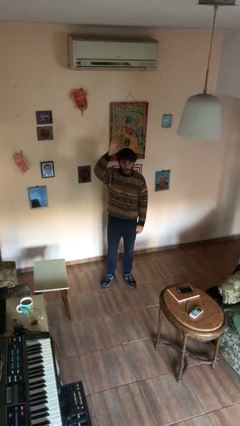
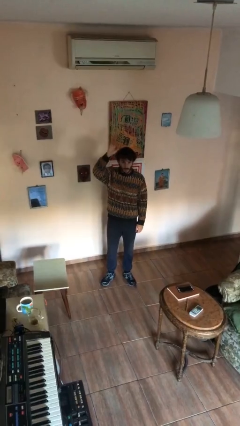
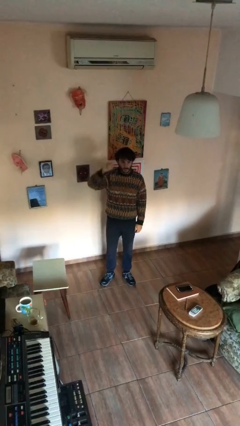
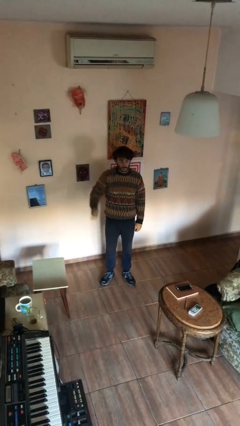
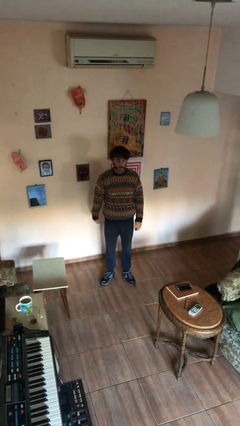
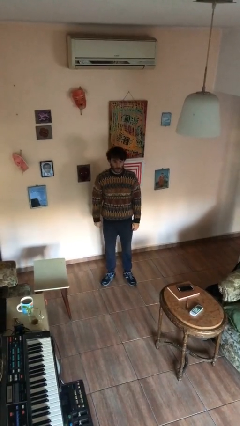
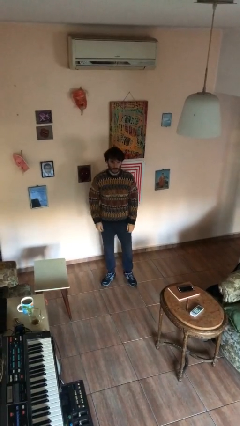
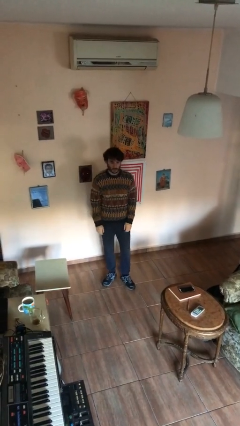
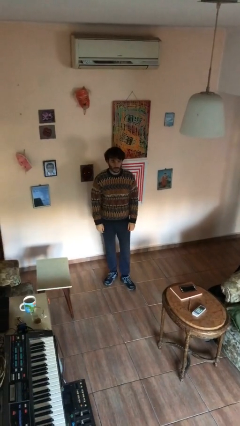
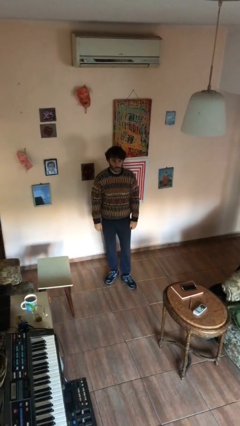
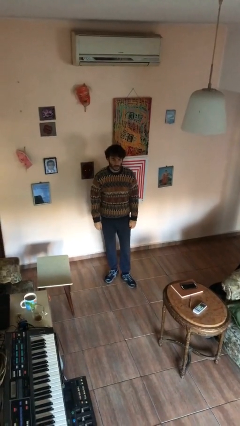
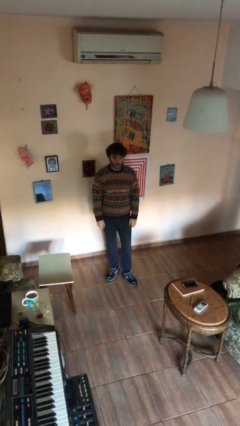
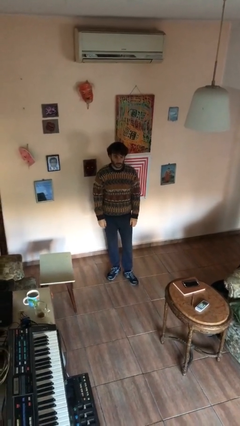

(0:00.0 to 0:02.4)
person gestures lower hand

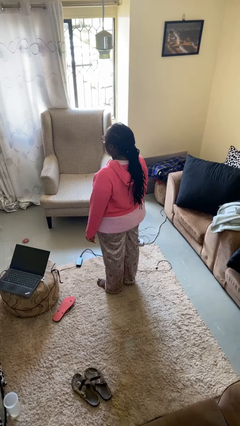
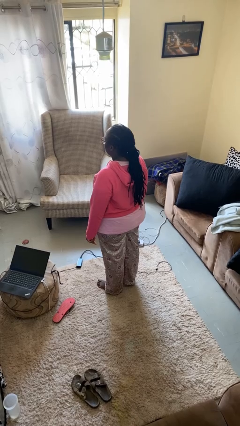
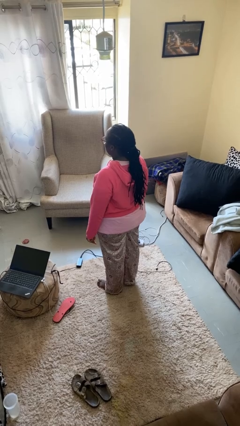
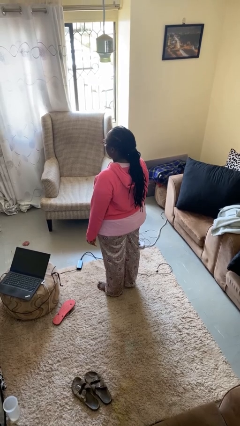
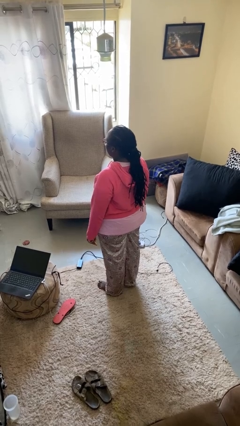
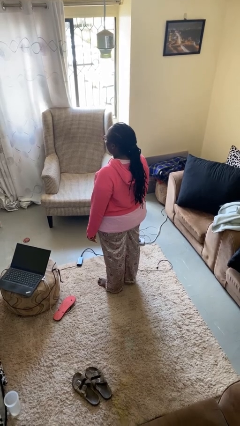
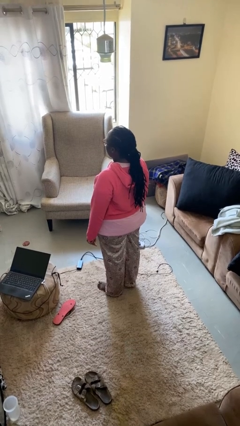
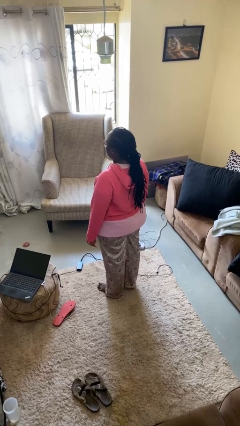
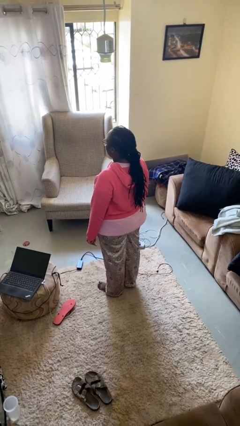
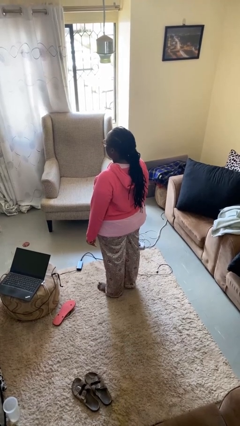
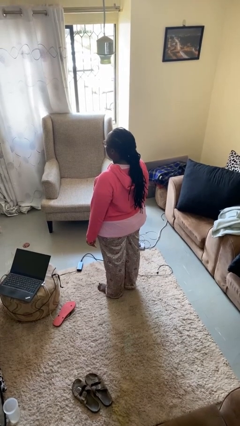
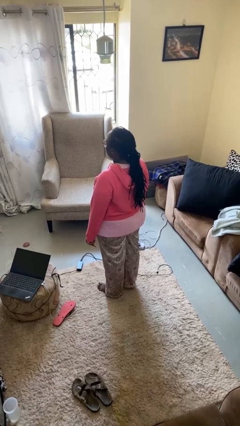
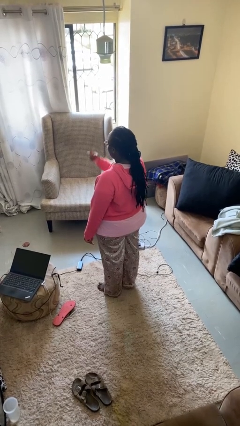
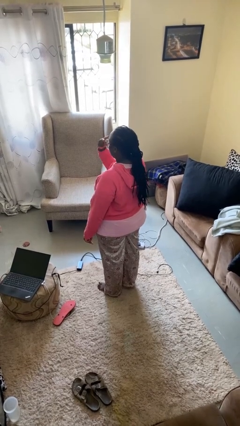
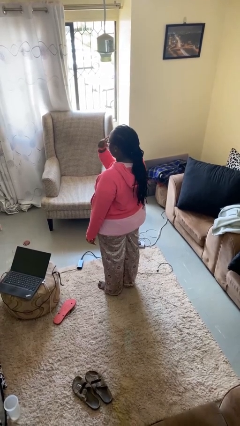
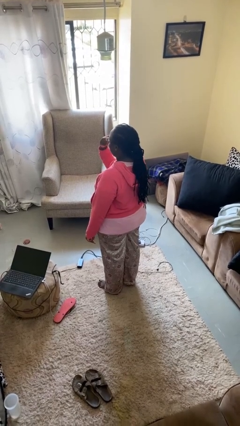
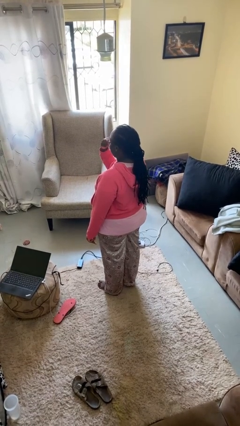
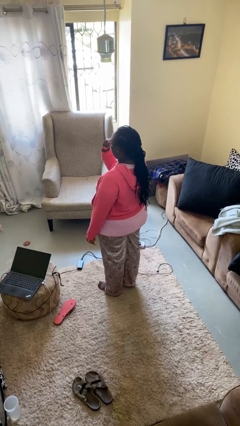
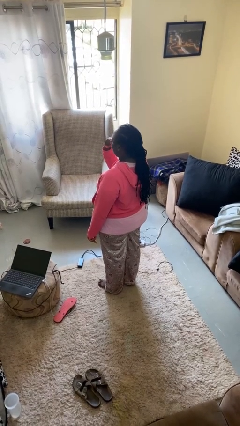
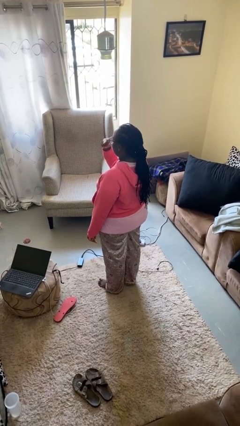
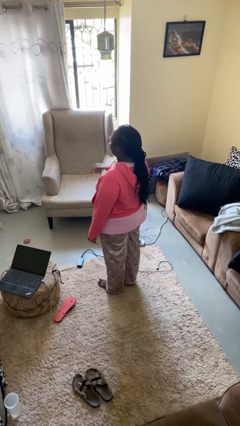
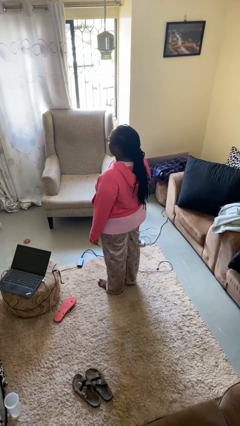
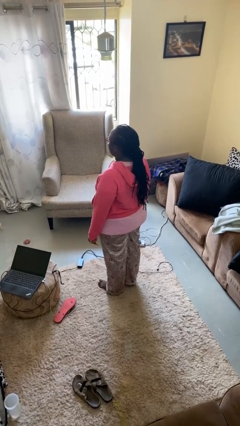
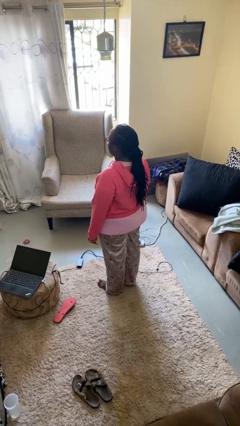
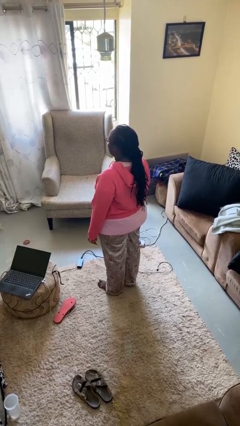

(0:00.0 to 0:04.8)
person gestures watch closely

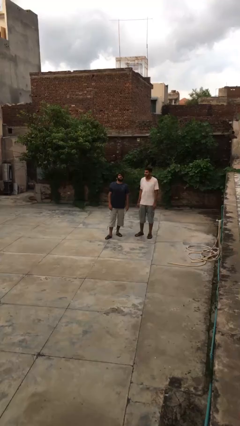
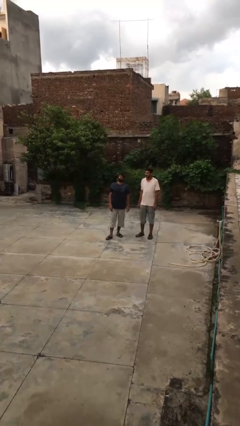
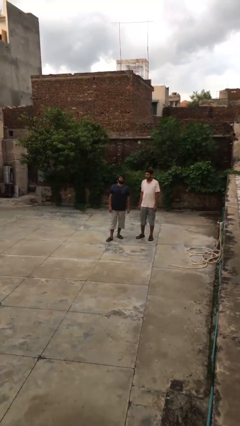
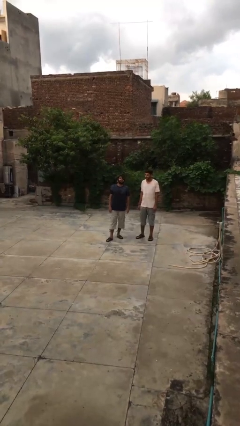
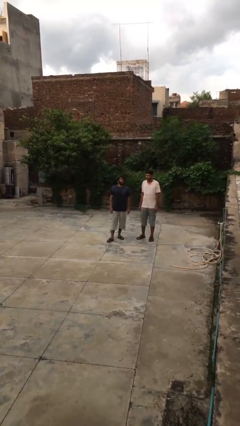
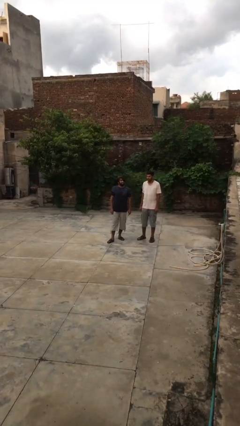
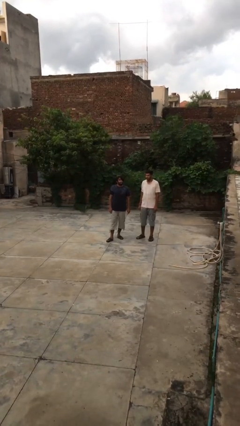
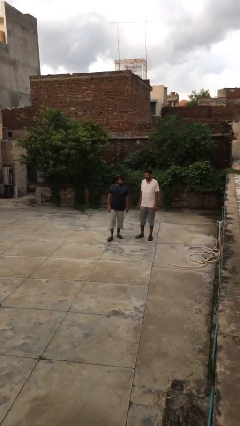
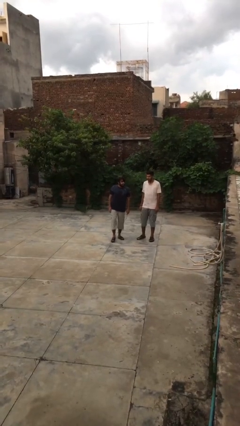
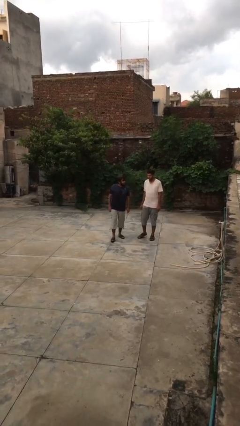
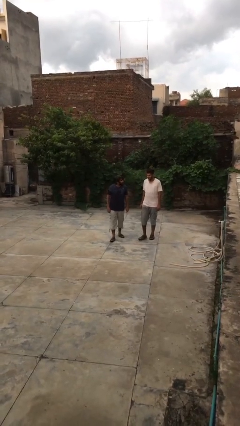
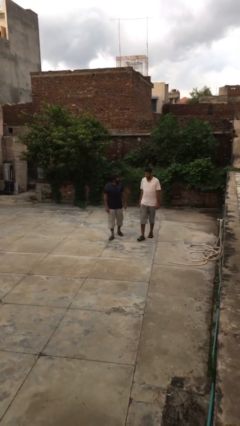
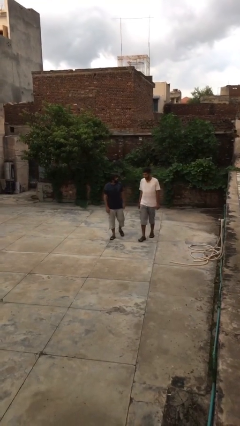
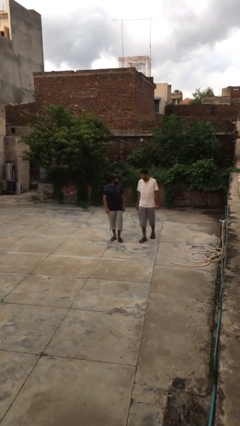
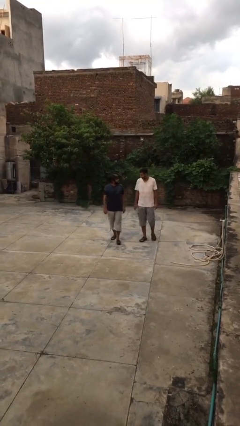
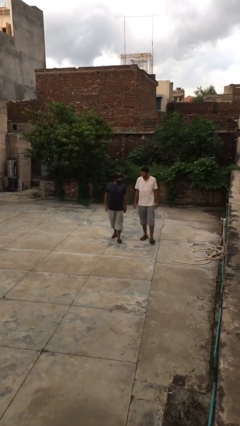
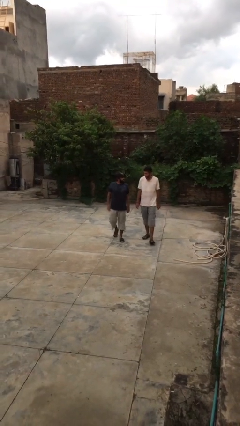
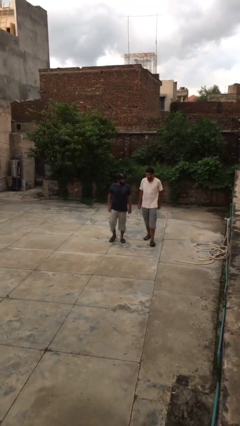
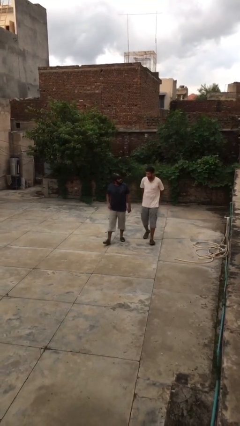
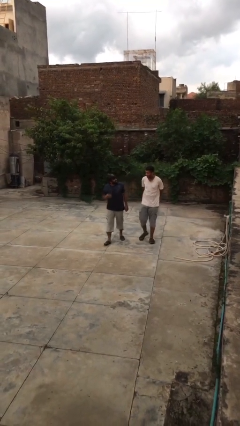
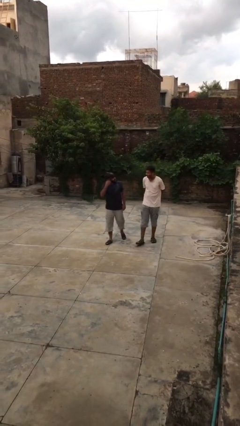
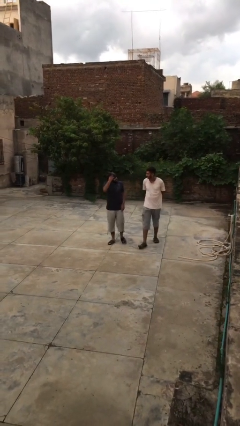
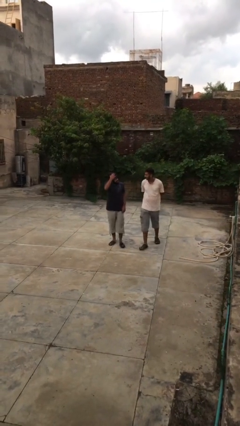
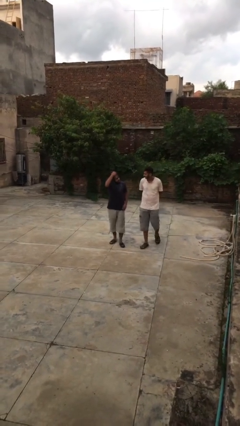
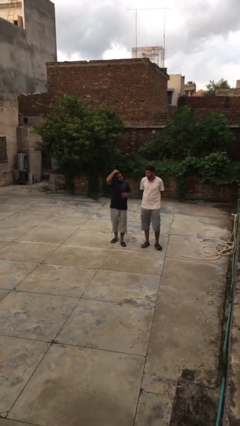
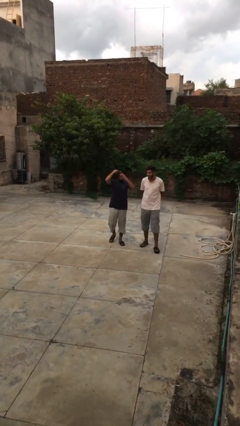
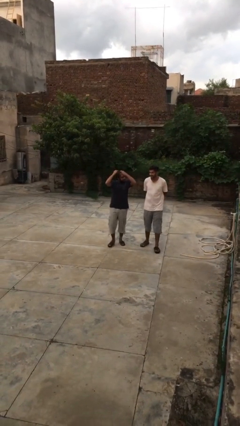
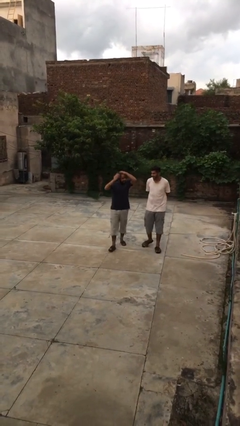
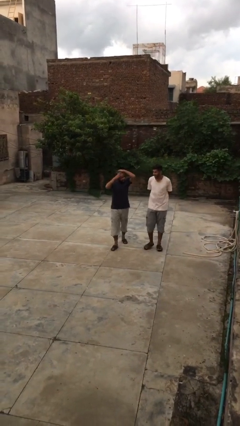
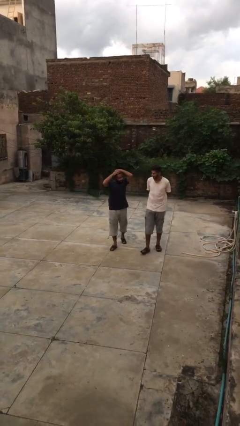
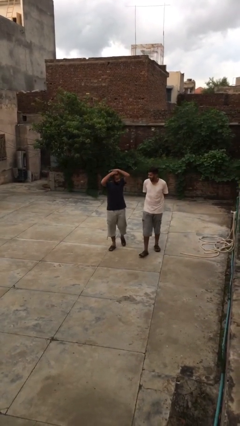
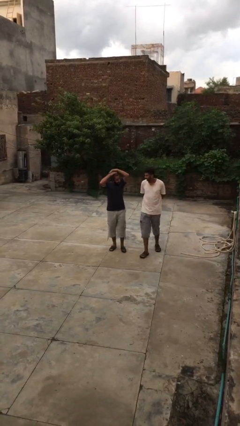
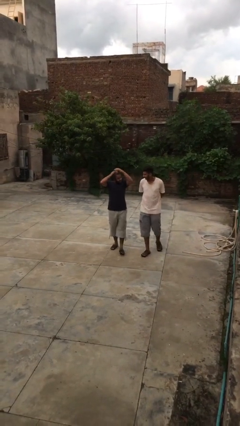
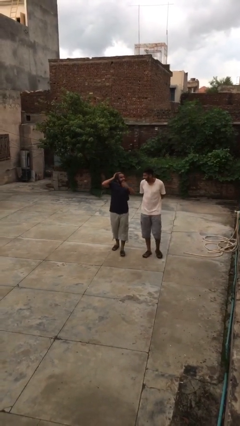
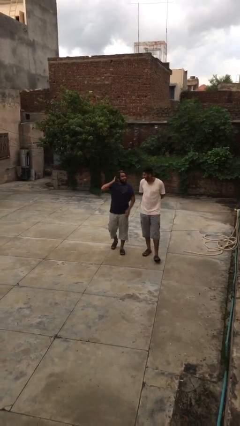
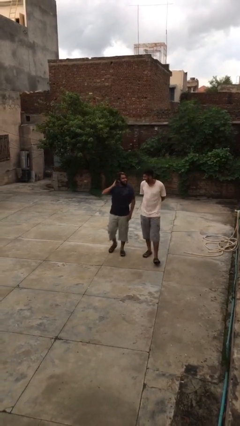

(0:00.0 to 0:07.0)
person talks to person

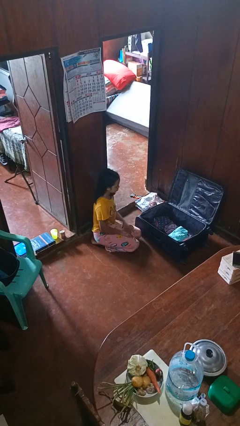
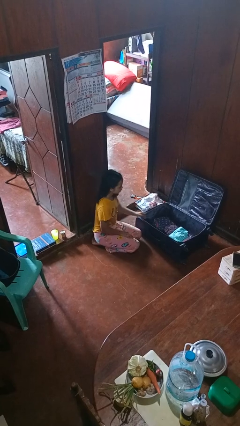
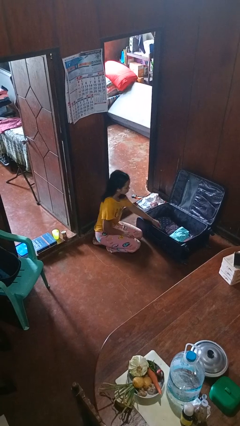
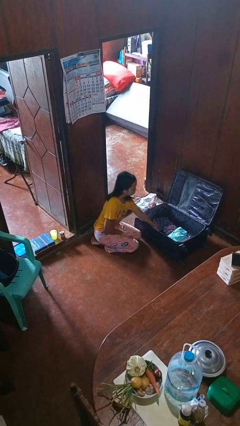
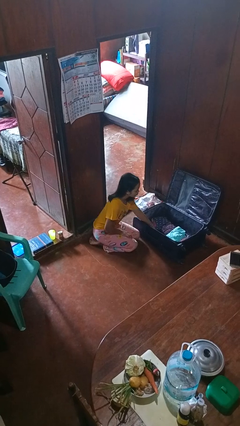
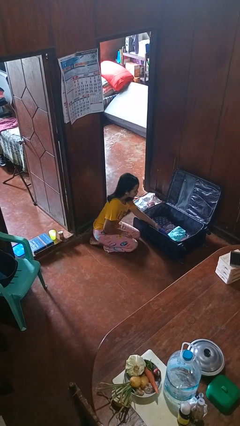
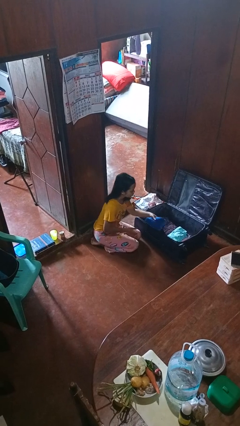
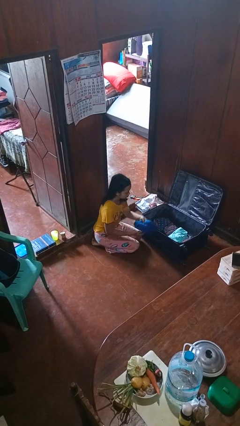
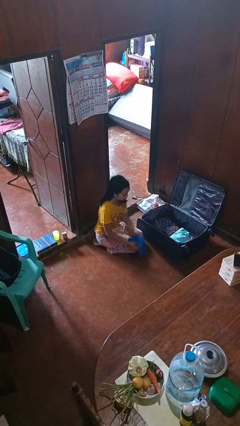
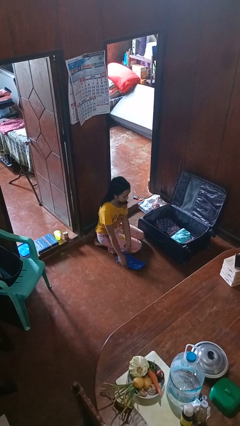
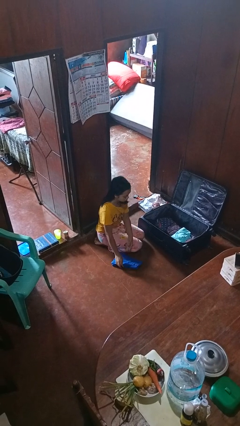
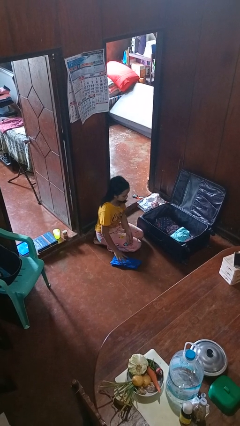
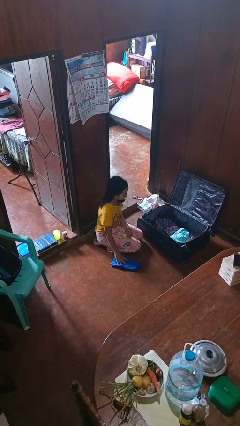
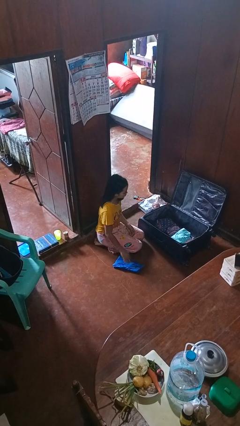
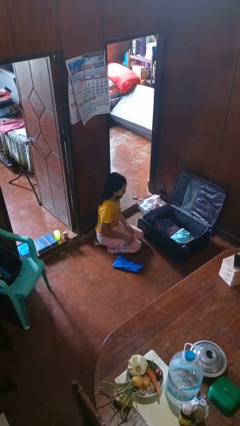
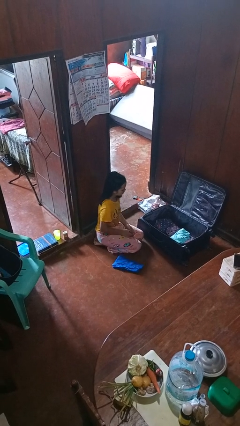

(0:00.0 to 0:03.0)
person unloads clothes from suitcase

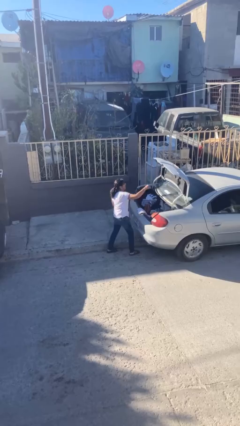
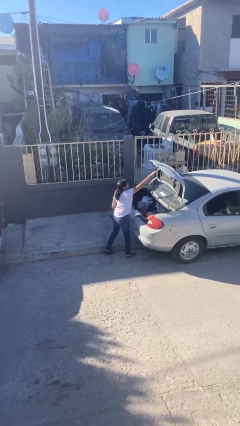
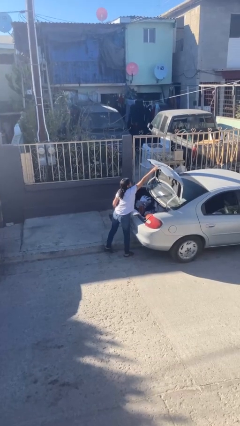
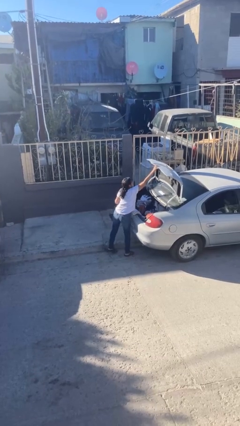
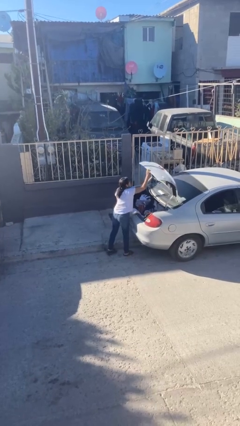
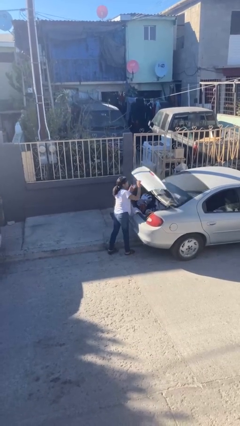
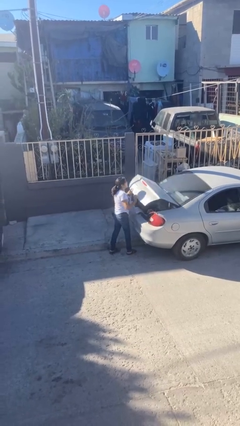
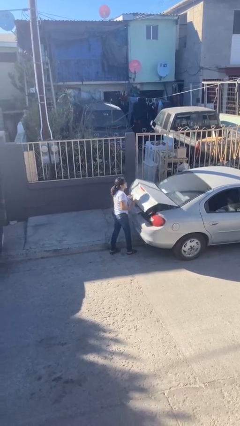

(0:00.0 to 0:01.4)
person closes car trunk
